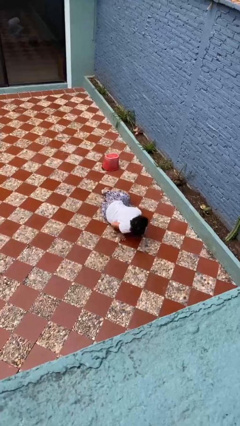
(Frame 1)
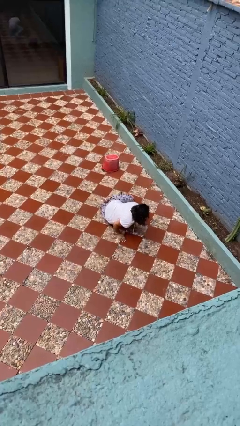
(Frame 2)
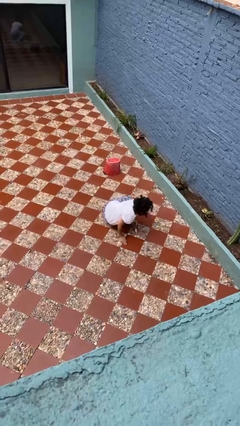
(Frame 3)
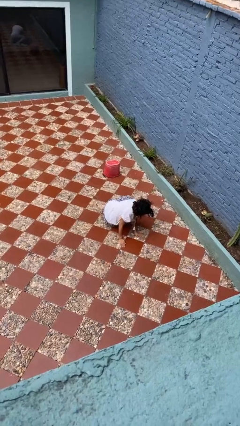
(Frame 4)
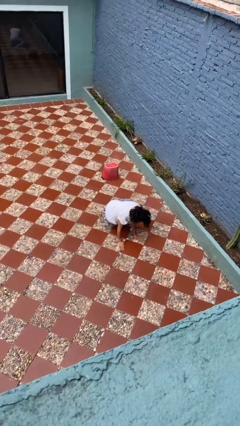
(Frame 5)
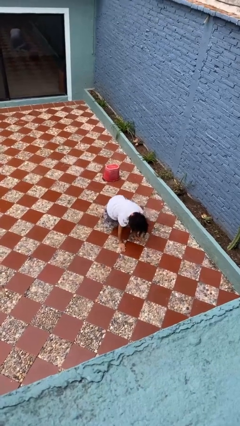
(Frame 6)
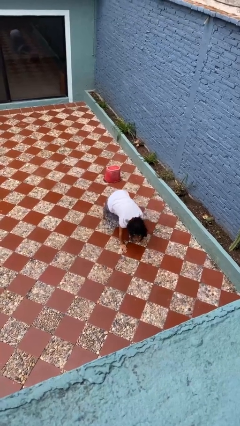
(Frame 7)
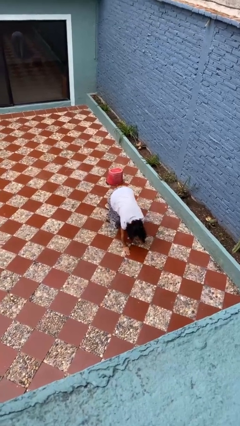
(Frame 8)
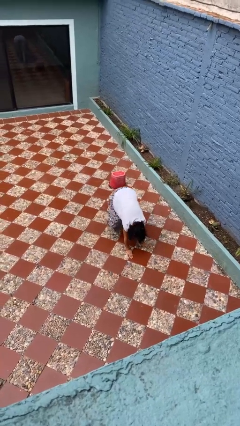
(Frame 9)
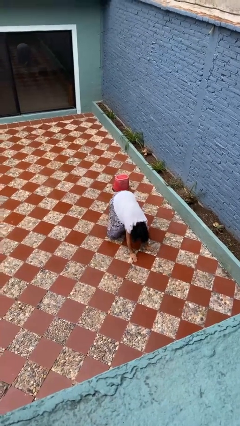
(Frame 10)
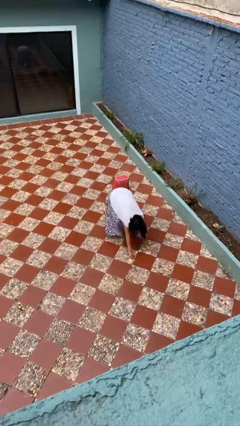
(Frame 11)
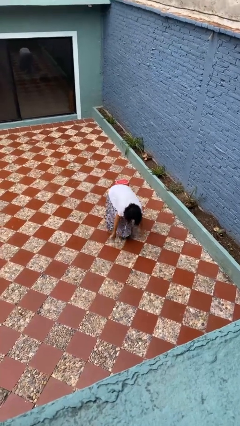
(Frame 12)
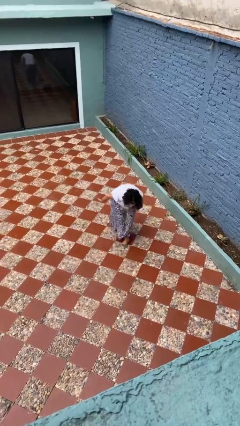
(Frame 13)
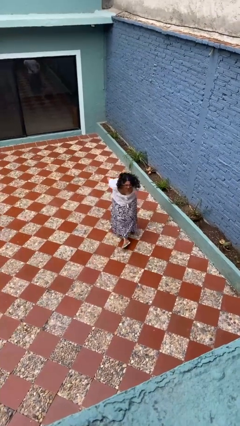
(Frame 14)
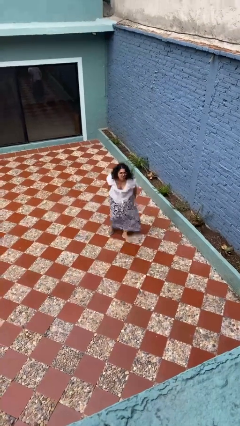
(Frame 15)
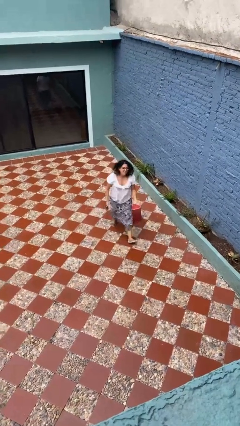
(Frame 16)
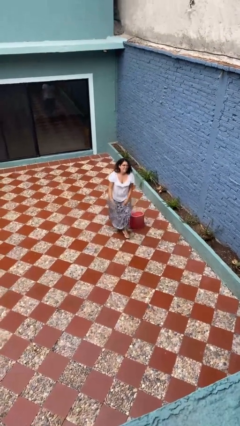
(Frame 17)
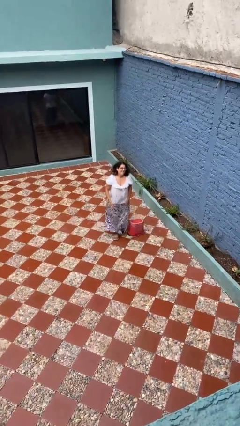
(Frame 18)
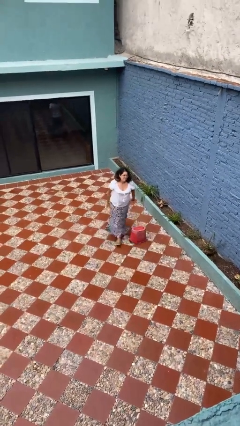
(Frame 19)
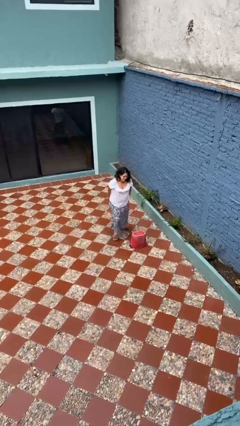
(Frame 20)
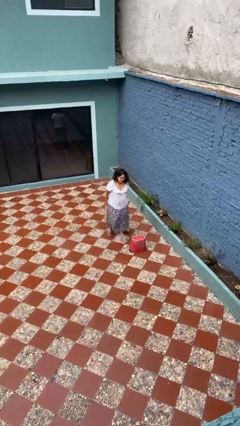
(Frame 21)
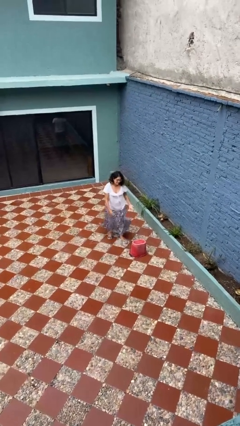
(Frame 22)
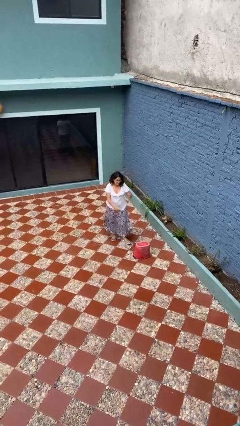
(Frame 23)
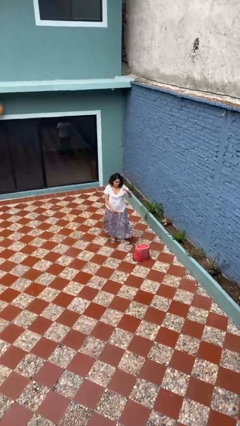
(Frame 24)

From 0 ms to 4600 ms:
person stands up from floor

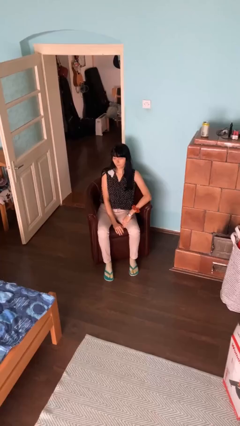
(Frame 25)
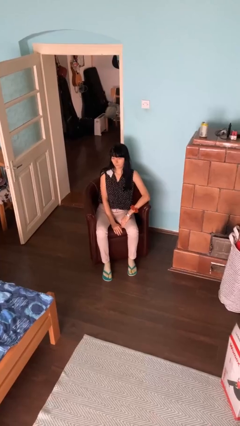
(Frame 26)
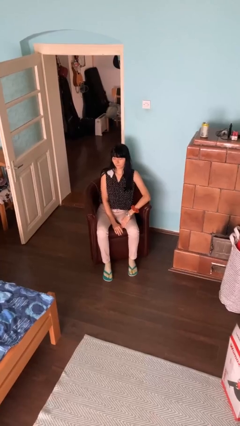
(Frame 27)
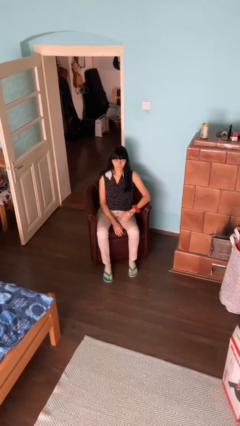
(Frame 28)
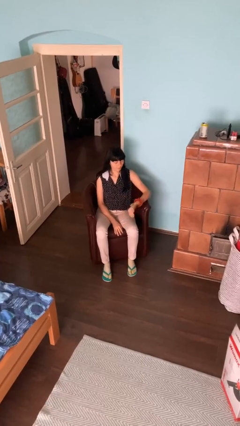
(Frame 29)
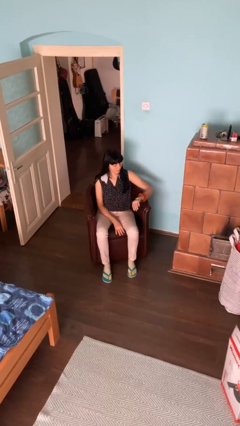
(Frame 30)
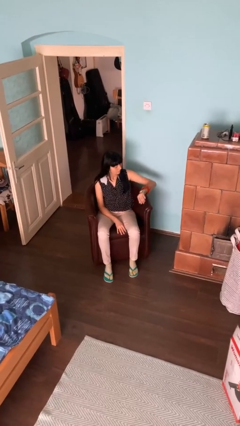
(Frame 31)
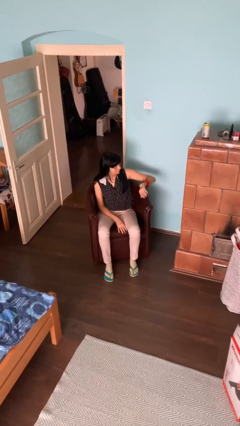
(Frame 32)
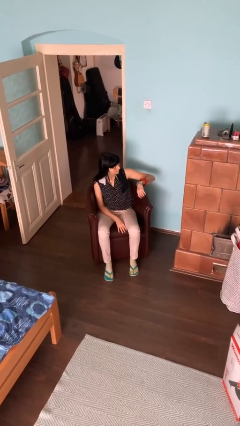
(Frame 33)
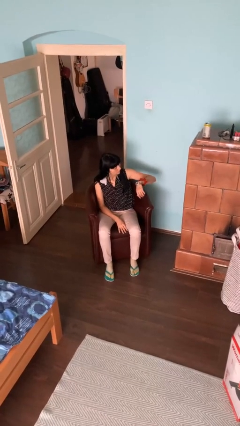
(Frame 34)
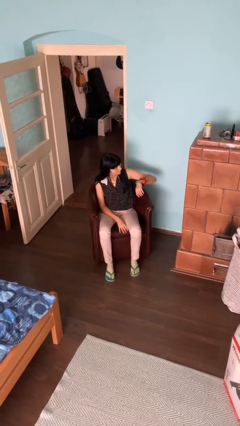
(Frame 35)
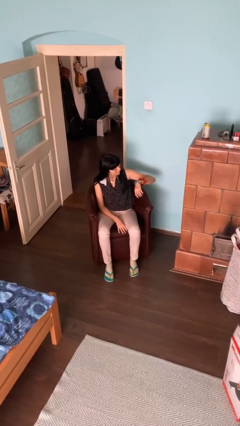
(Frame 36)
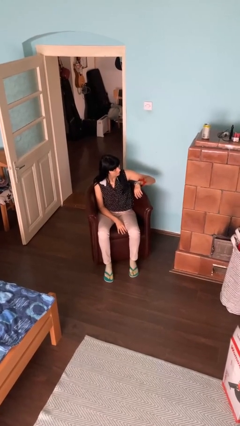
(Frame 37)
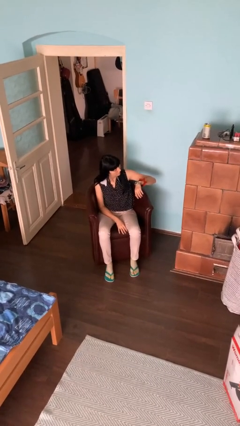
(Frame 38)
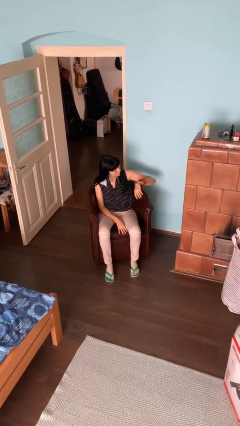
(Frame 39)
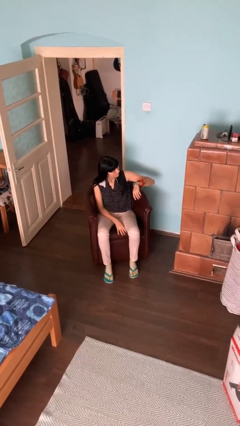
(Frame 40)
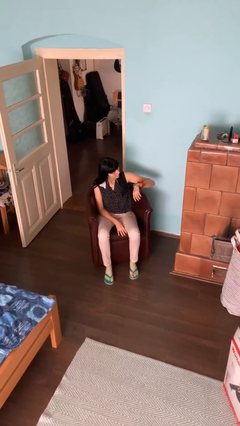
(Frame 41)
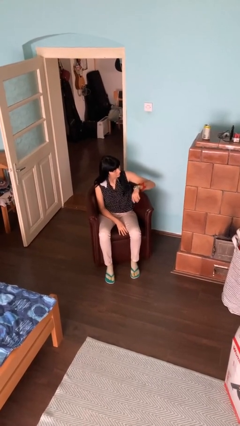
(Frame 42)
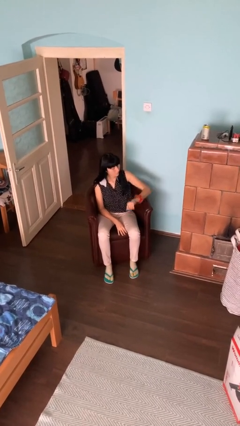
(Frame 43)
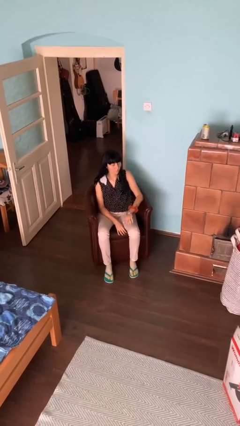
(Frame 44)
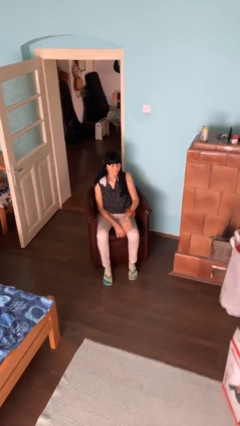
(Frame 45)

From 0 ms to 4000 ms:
person looks at wristwatch

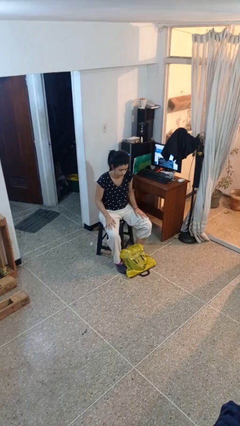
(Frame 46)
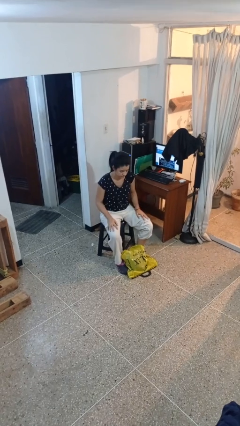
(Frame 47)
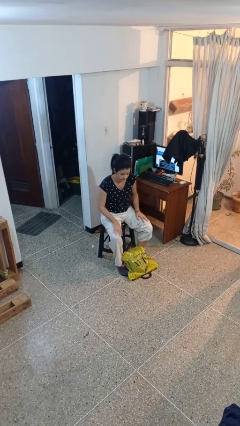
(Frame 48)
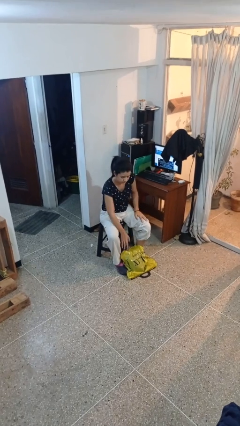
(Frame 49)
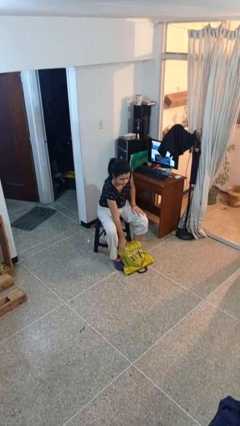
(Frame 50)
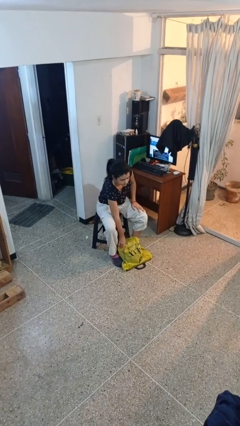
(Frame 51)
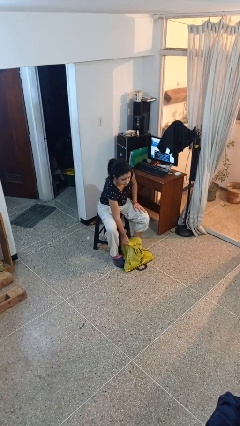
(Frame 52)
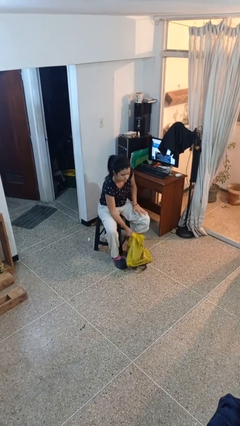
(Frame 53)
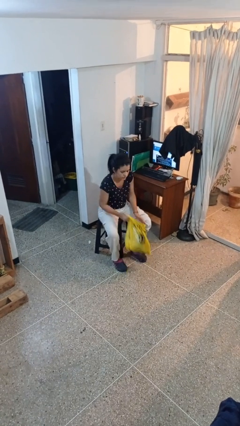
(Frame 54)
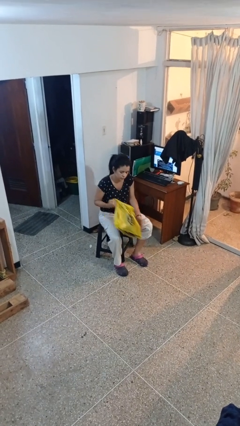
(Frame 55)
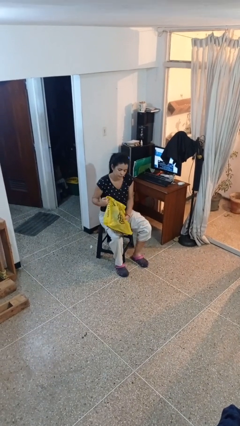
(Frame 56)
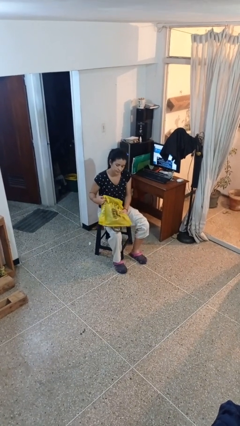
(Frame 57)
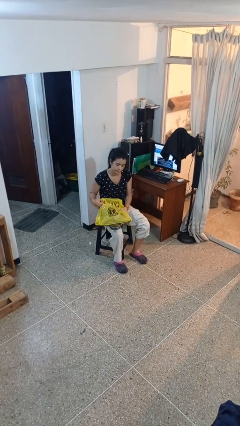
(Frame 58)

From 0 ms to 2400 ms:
person picks up object from floor

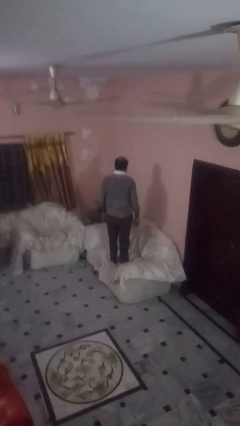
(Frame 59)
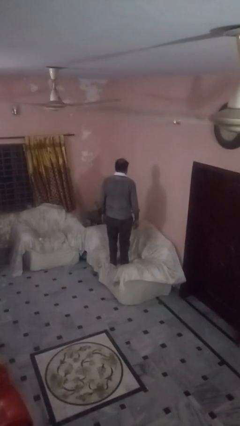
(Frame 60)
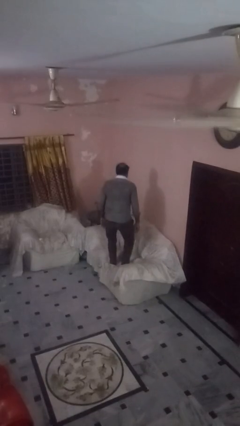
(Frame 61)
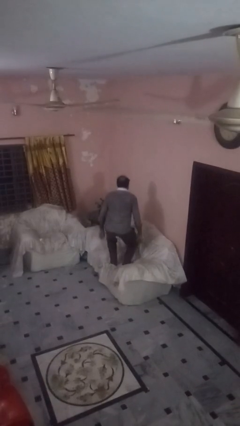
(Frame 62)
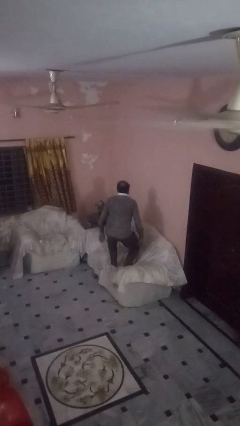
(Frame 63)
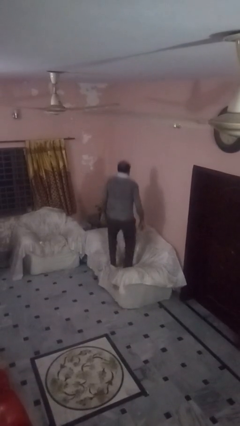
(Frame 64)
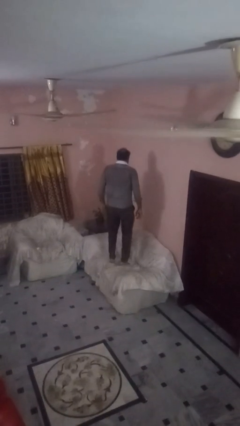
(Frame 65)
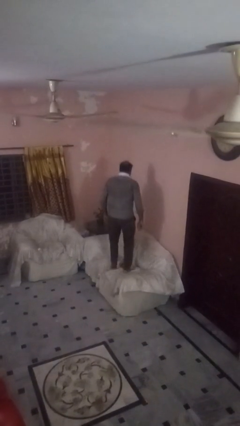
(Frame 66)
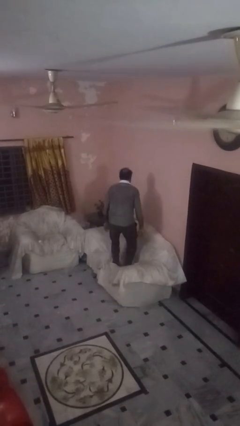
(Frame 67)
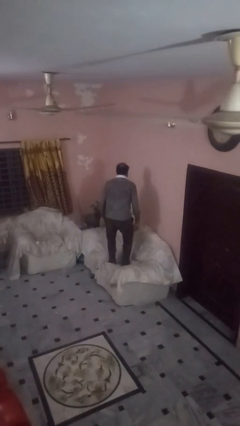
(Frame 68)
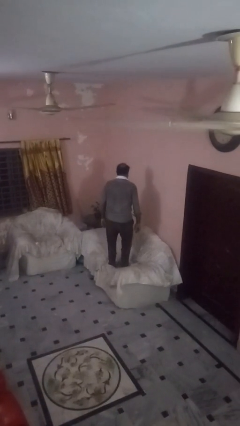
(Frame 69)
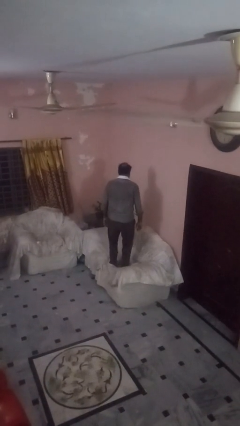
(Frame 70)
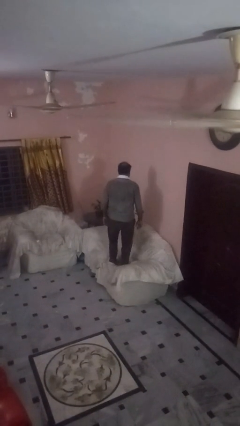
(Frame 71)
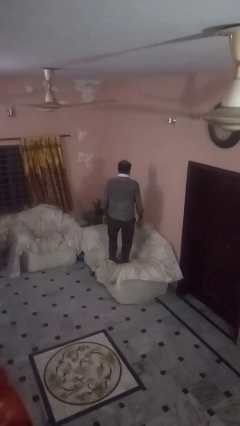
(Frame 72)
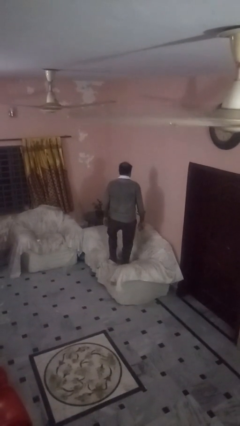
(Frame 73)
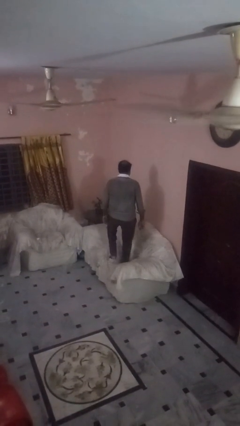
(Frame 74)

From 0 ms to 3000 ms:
person jumps on couch

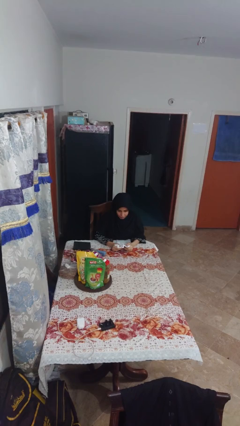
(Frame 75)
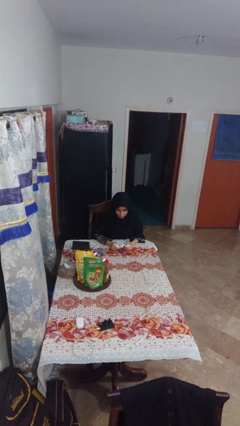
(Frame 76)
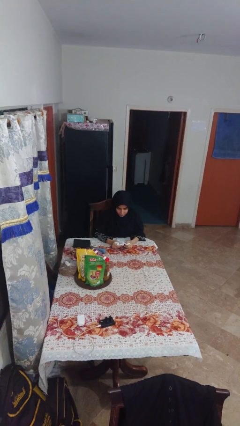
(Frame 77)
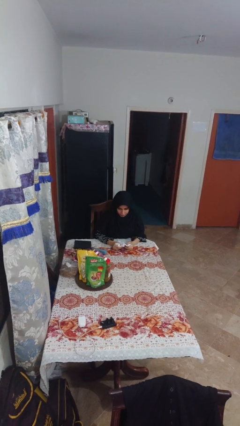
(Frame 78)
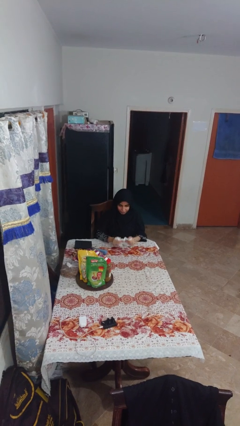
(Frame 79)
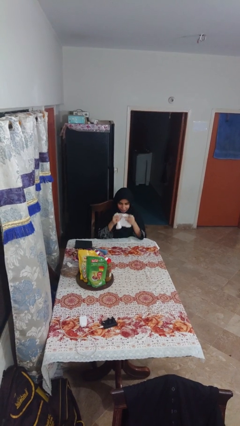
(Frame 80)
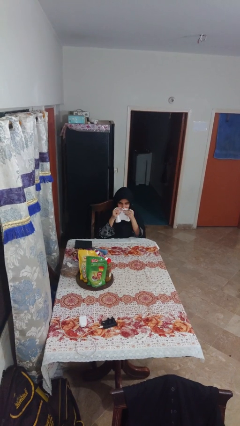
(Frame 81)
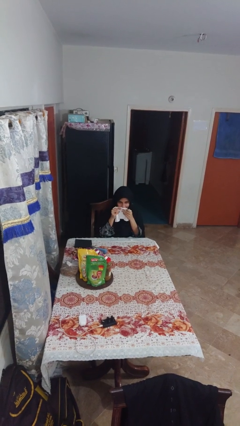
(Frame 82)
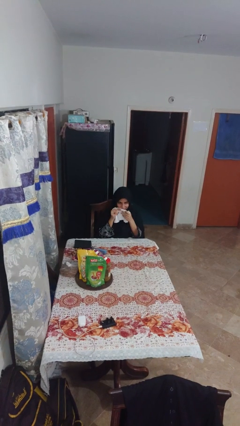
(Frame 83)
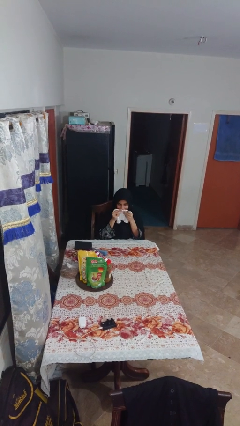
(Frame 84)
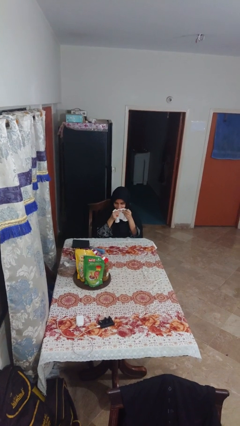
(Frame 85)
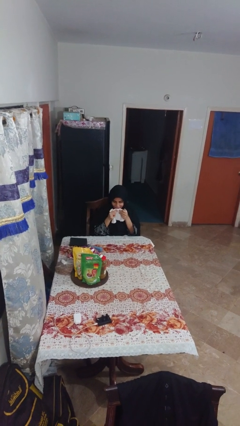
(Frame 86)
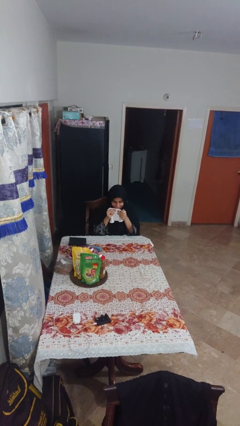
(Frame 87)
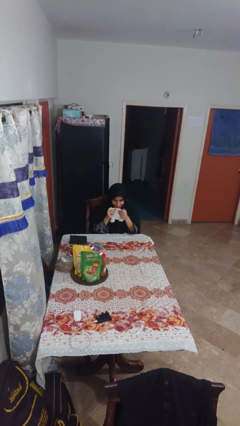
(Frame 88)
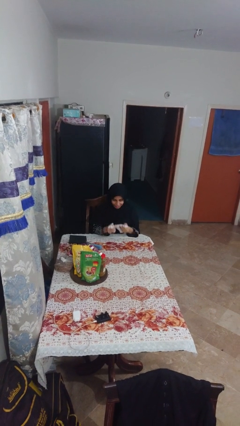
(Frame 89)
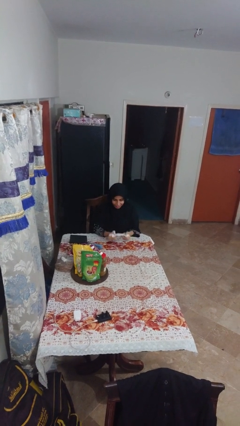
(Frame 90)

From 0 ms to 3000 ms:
person wipes mouth with napkin
